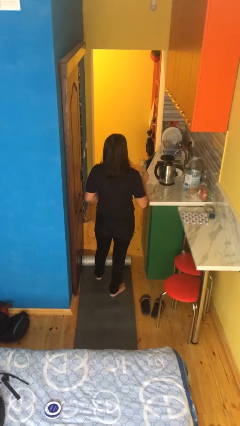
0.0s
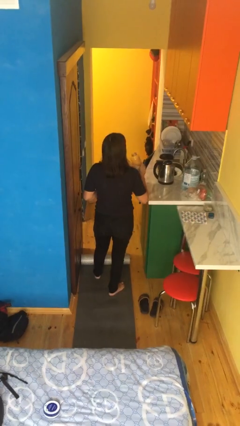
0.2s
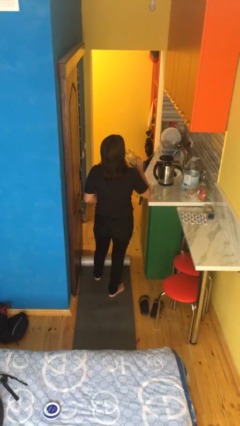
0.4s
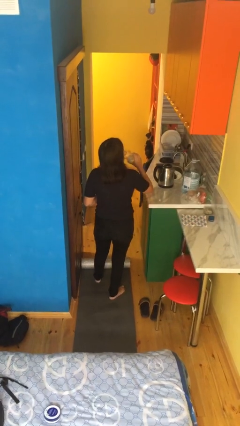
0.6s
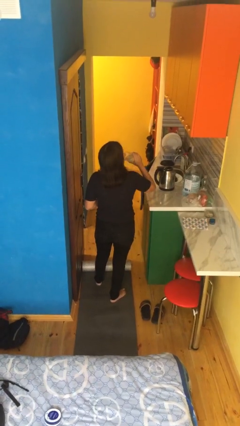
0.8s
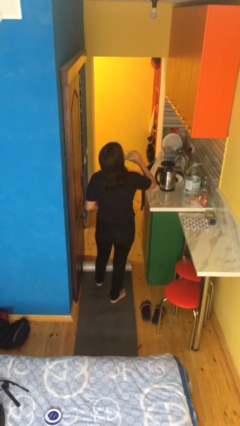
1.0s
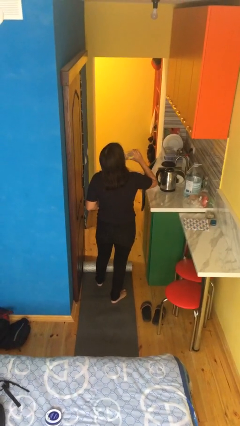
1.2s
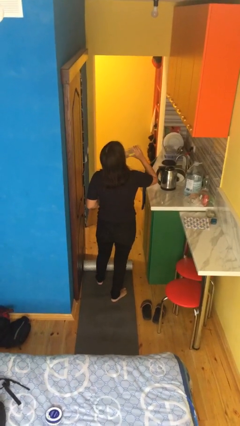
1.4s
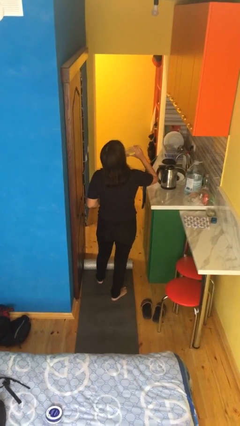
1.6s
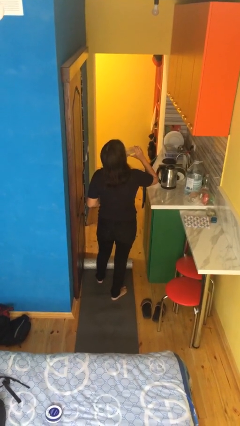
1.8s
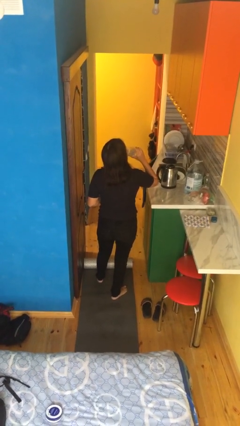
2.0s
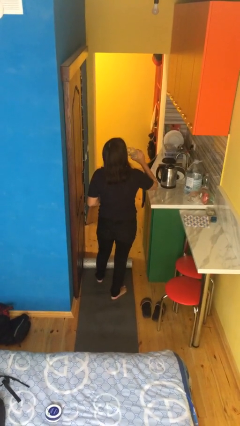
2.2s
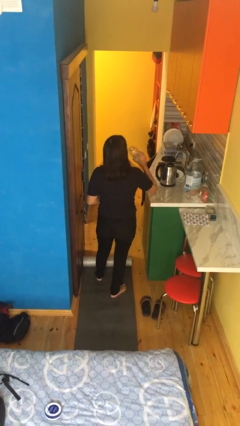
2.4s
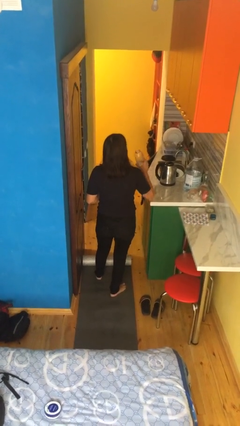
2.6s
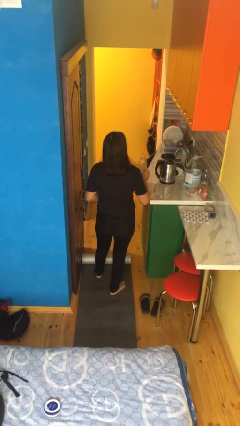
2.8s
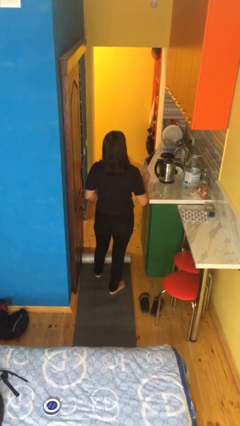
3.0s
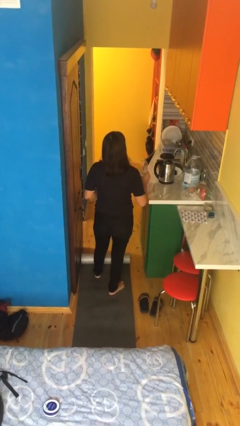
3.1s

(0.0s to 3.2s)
person drinks from bottle

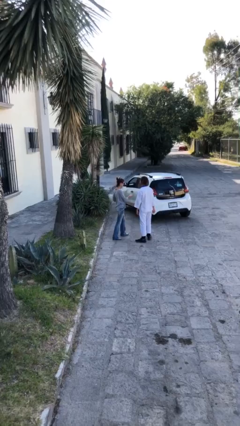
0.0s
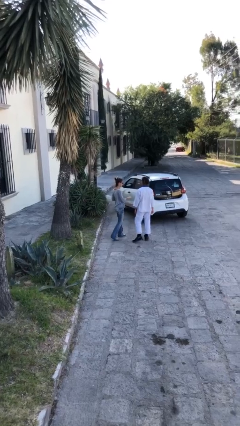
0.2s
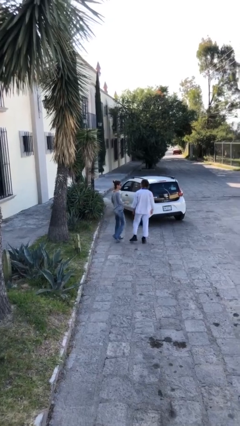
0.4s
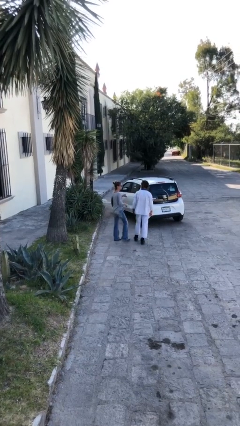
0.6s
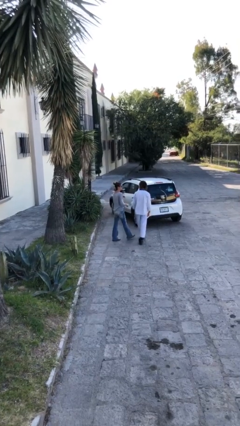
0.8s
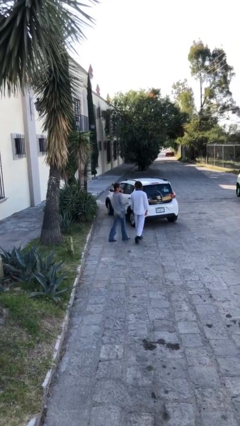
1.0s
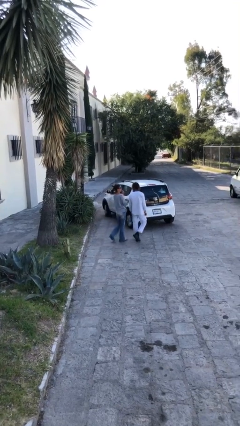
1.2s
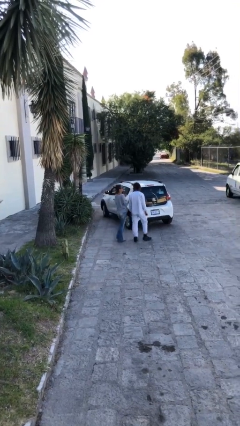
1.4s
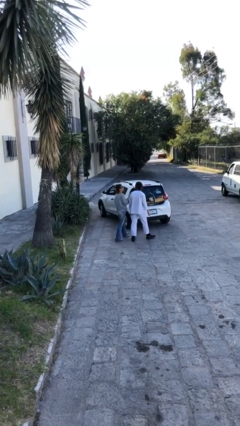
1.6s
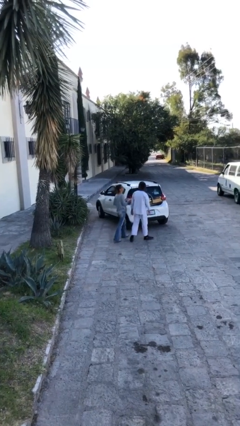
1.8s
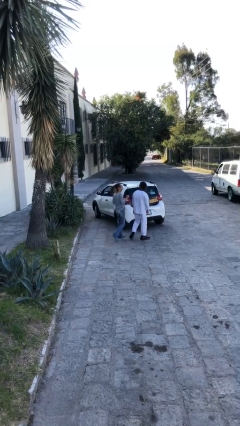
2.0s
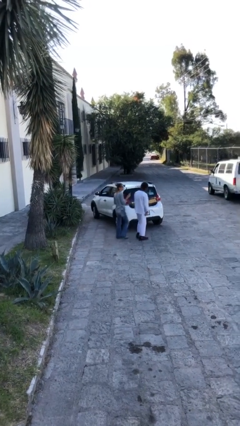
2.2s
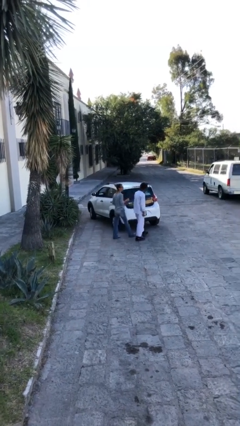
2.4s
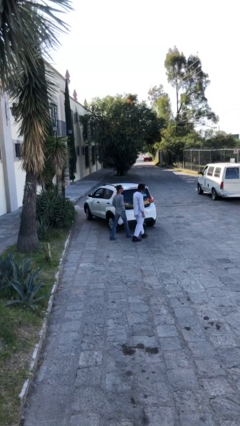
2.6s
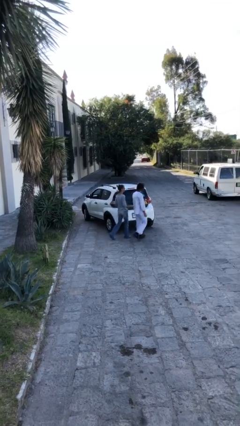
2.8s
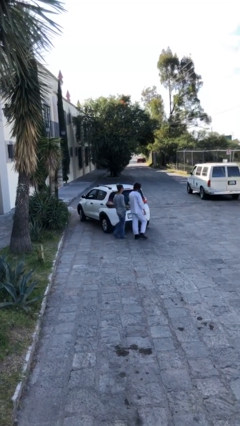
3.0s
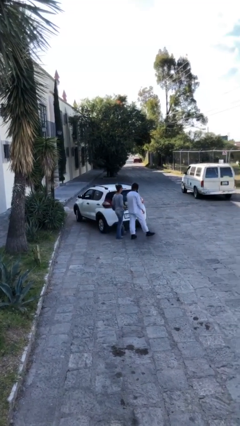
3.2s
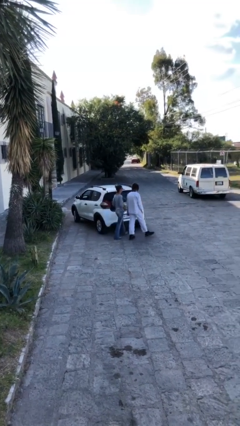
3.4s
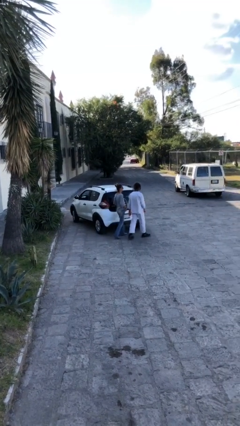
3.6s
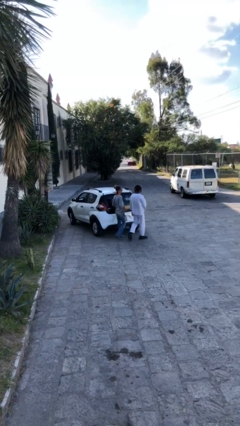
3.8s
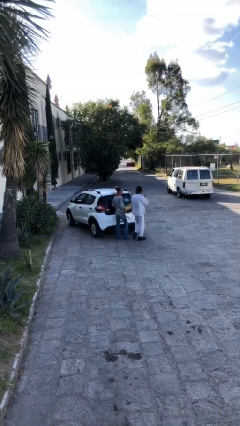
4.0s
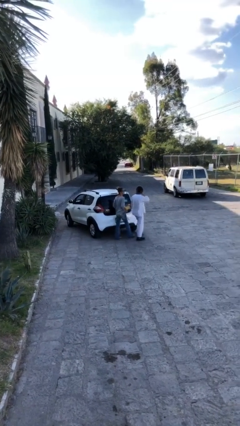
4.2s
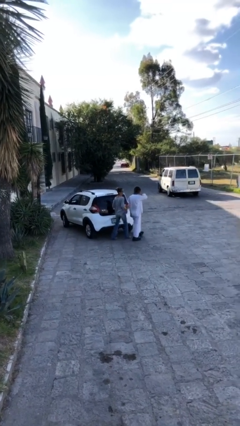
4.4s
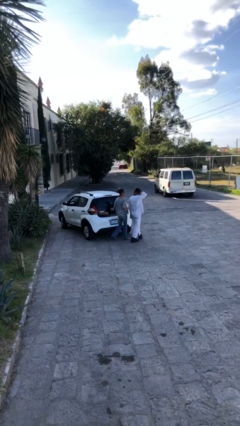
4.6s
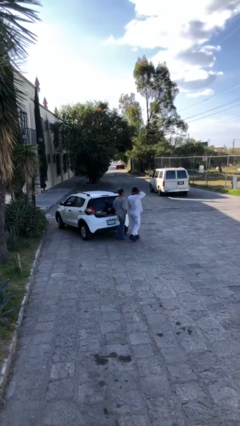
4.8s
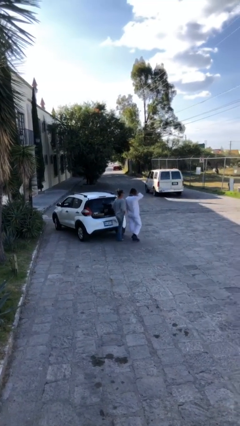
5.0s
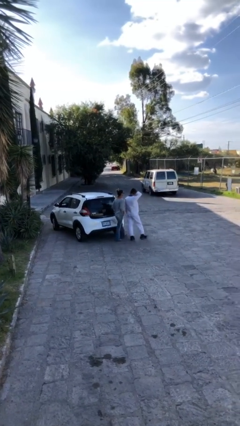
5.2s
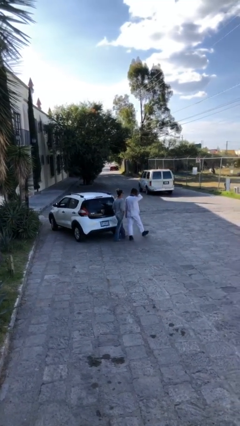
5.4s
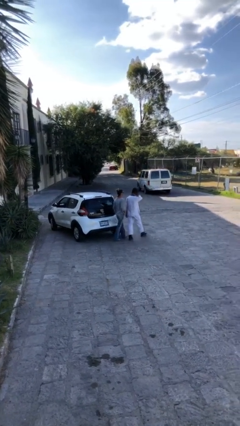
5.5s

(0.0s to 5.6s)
person talks to person

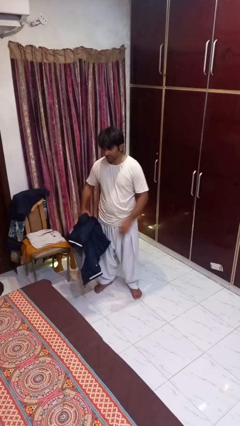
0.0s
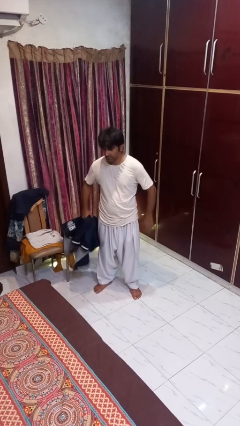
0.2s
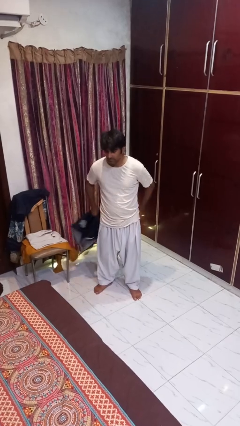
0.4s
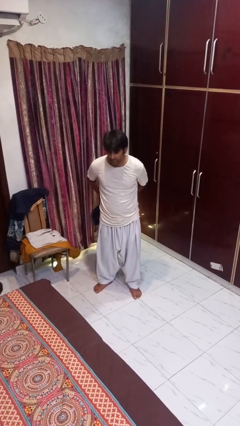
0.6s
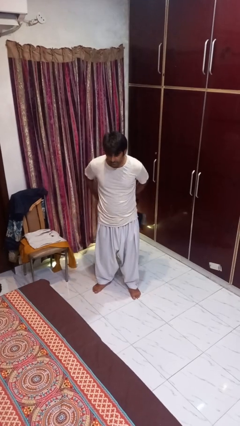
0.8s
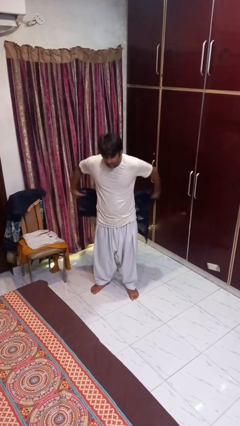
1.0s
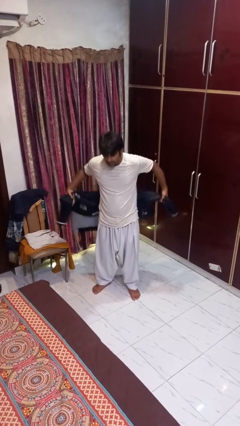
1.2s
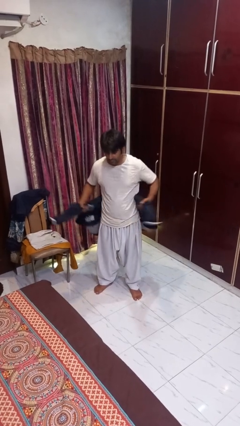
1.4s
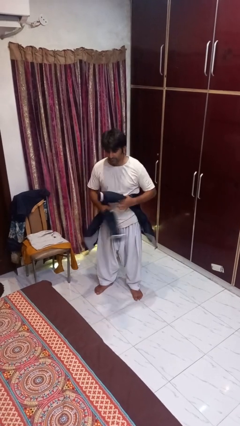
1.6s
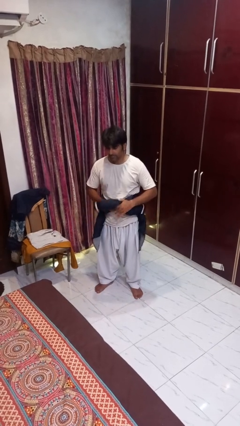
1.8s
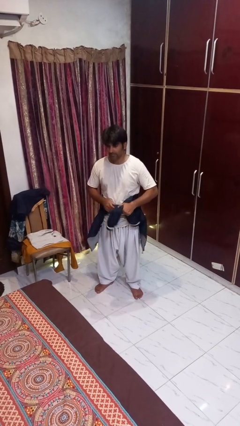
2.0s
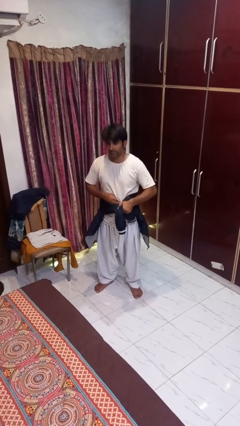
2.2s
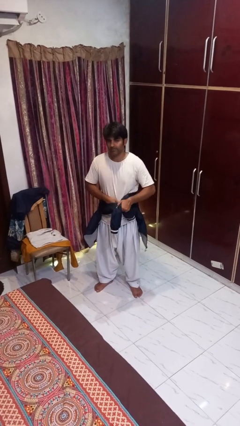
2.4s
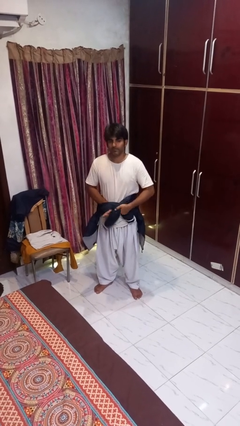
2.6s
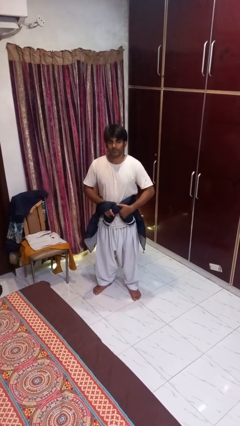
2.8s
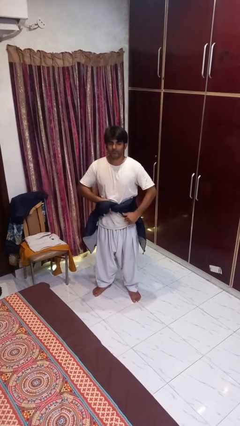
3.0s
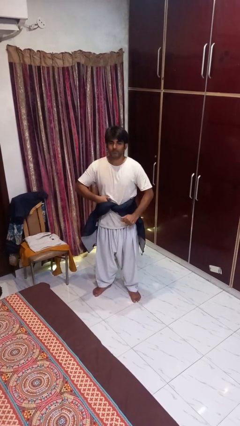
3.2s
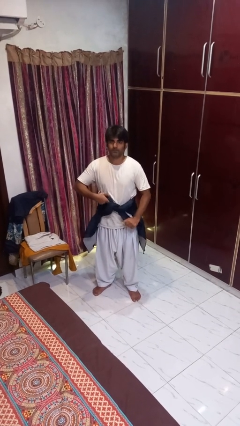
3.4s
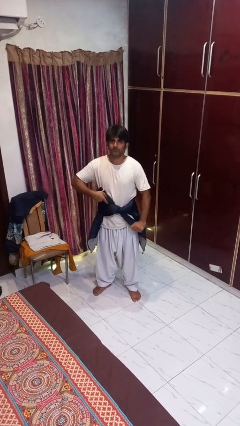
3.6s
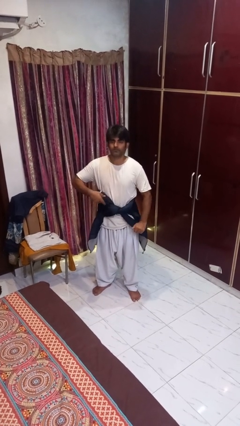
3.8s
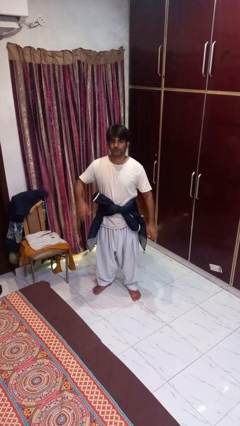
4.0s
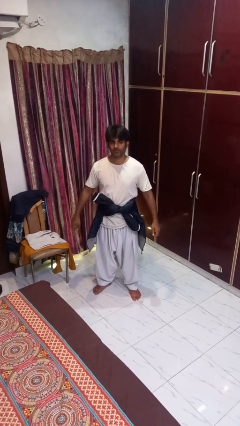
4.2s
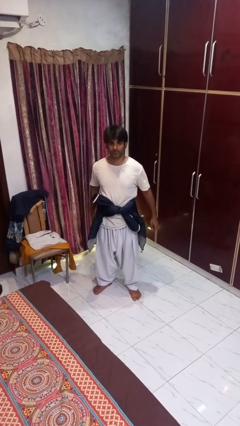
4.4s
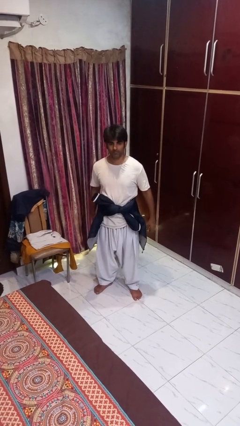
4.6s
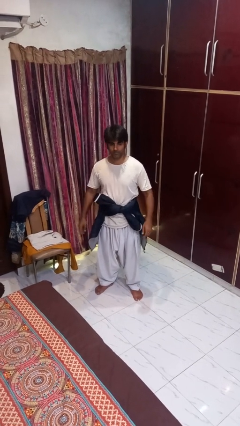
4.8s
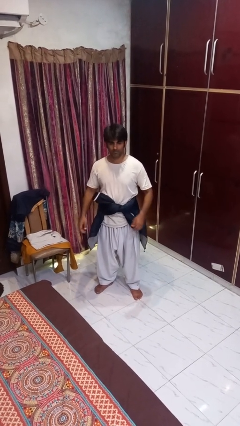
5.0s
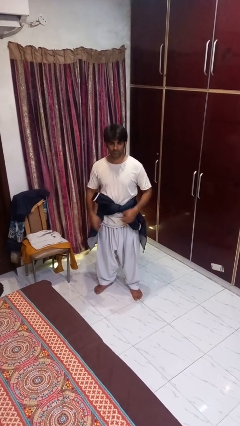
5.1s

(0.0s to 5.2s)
person ties jacket around waist

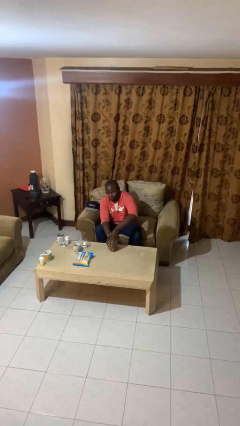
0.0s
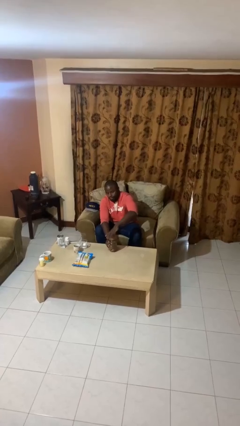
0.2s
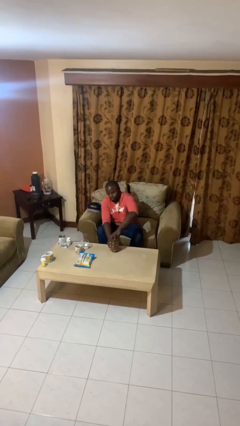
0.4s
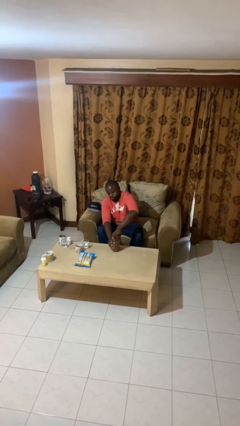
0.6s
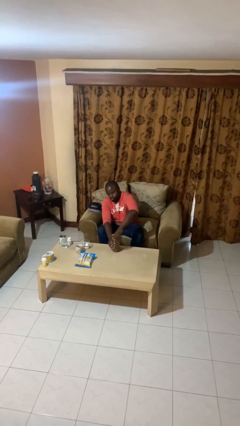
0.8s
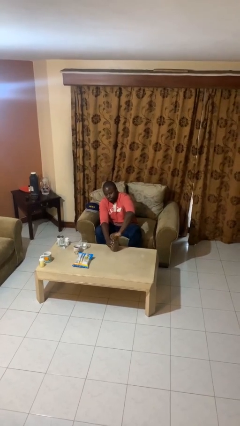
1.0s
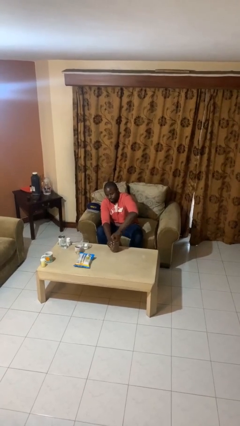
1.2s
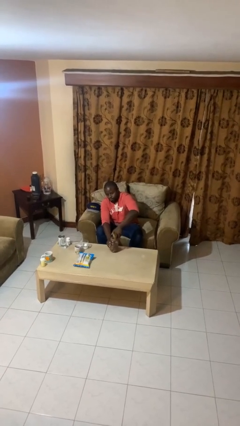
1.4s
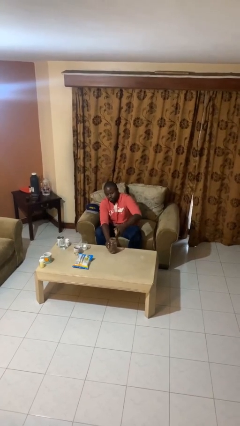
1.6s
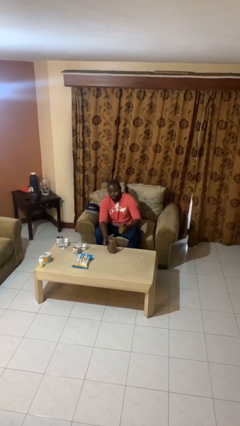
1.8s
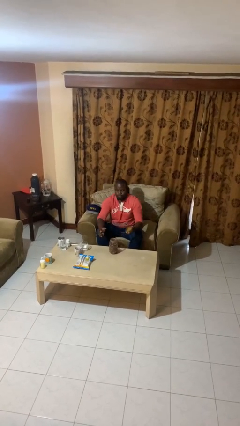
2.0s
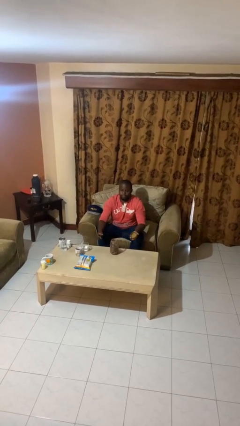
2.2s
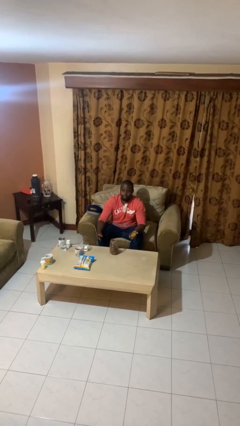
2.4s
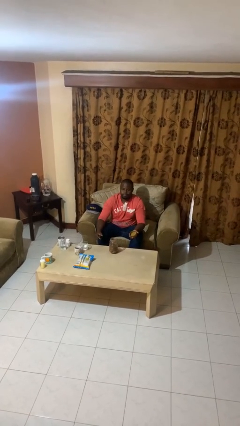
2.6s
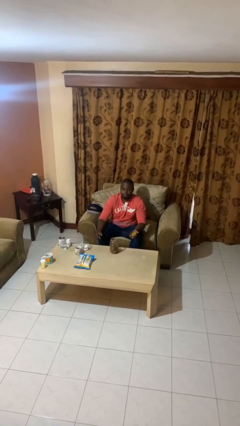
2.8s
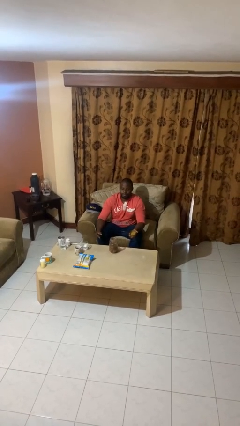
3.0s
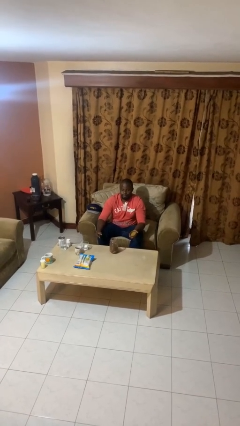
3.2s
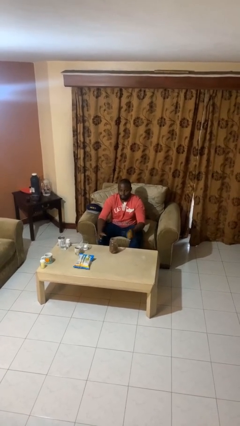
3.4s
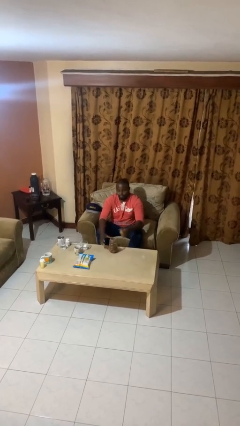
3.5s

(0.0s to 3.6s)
person opens jar
